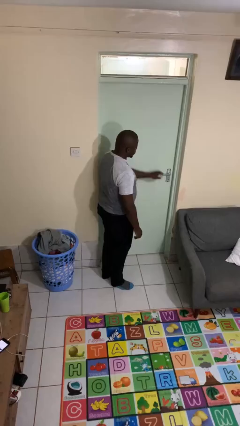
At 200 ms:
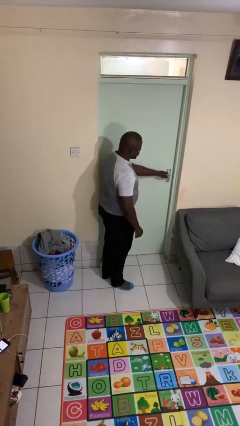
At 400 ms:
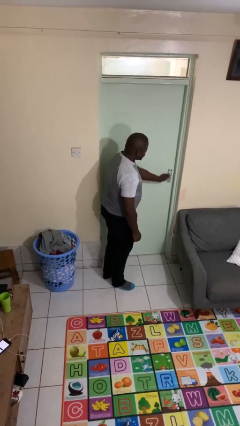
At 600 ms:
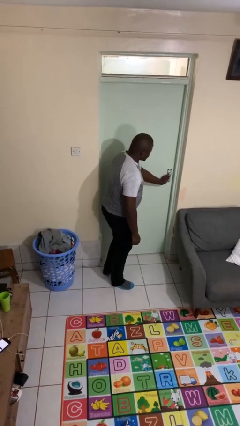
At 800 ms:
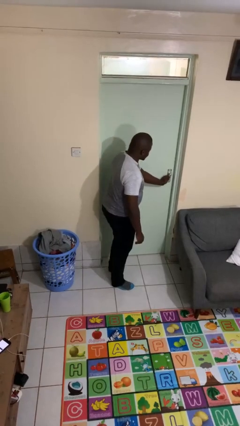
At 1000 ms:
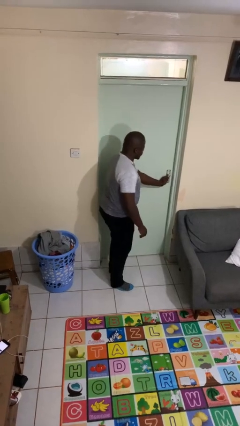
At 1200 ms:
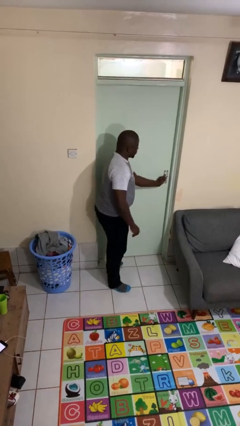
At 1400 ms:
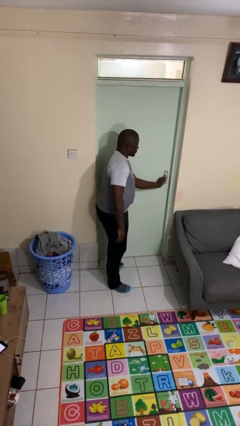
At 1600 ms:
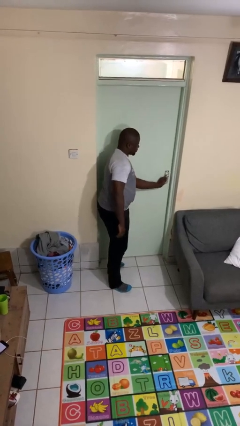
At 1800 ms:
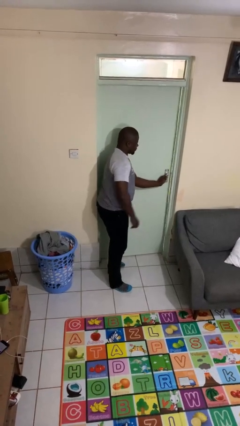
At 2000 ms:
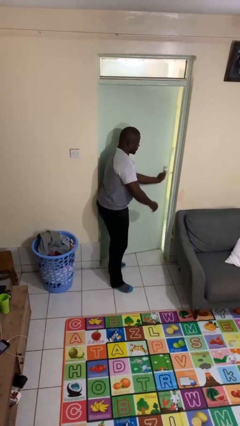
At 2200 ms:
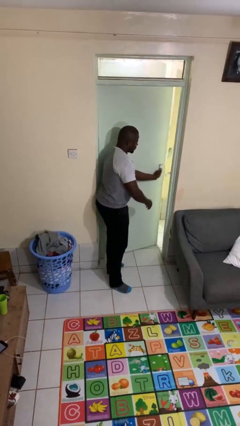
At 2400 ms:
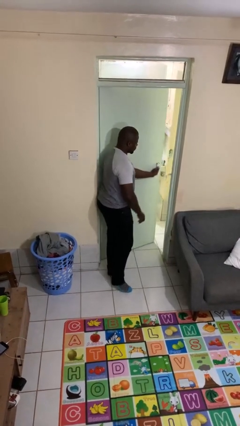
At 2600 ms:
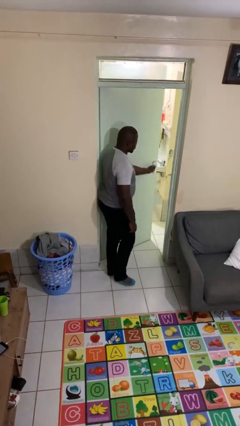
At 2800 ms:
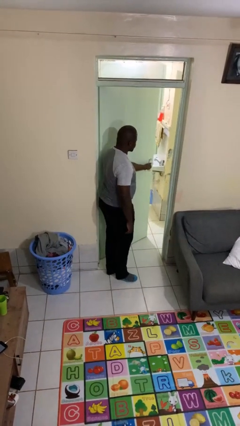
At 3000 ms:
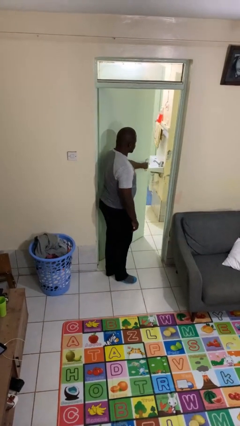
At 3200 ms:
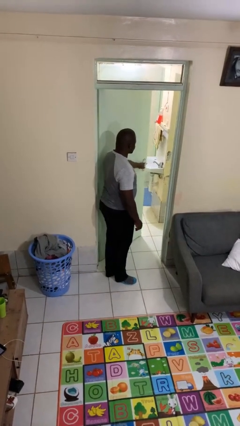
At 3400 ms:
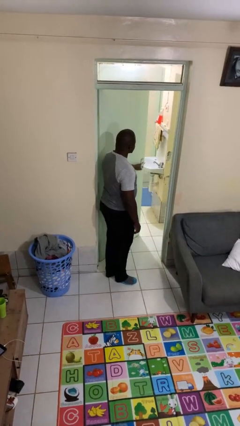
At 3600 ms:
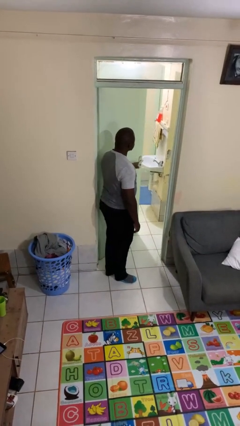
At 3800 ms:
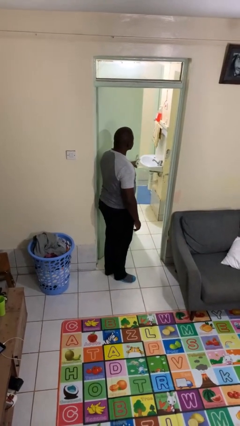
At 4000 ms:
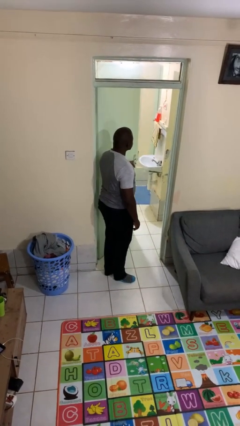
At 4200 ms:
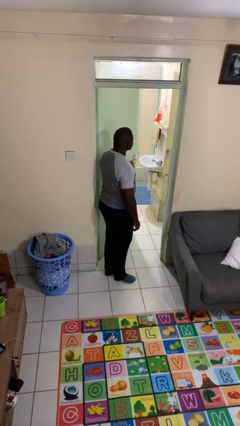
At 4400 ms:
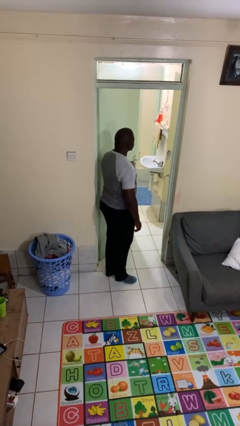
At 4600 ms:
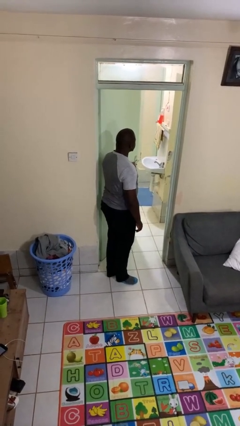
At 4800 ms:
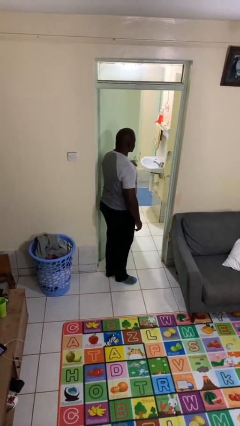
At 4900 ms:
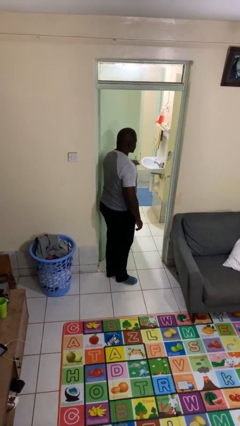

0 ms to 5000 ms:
person opens facility door

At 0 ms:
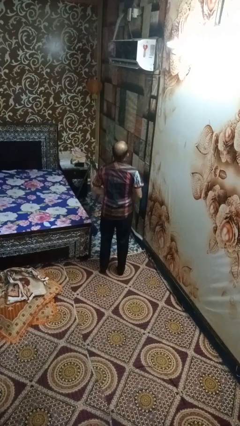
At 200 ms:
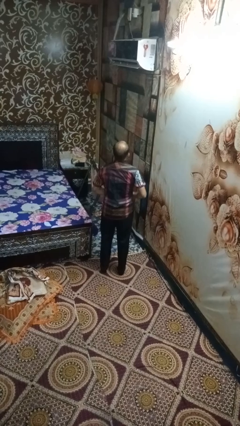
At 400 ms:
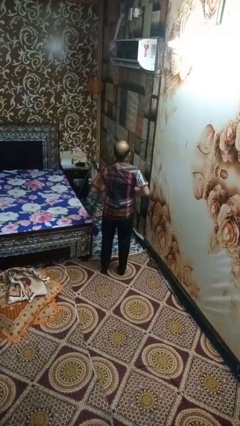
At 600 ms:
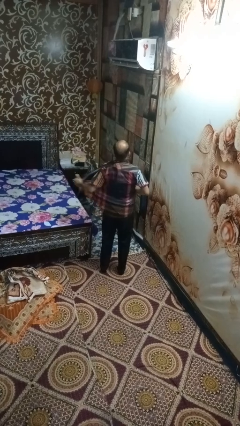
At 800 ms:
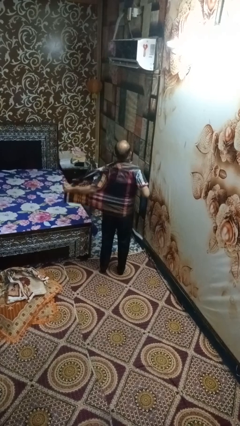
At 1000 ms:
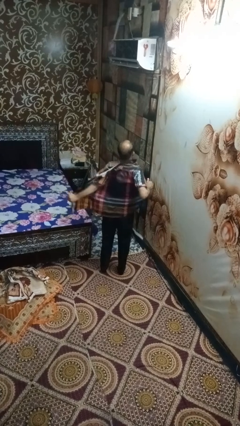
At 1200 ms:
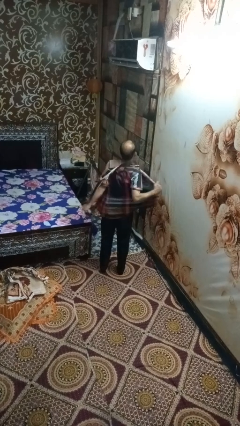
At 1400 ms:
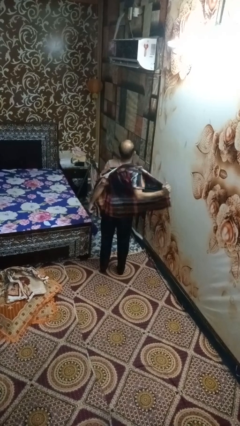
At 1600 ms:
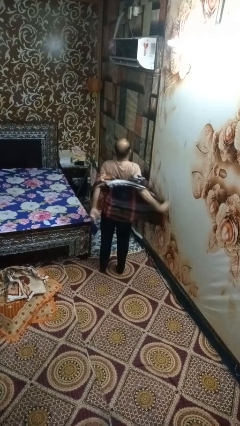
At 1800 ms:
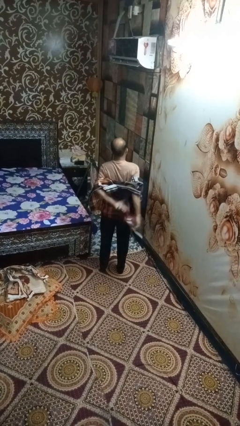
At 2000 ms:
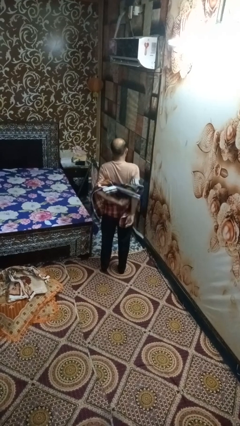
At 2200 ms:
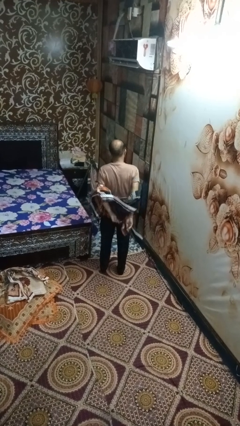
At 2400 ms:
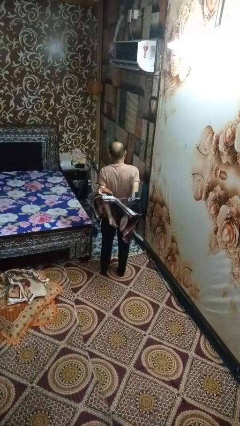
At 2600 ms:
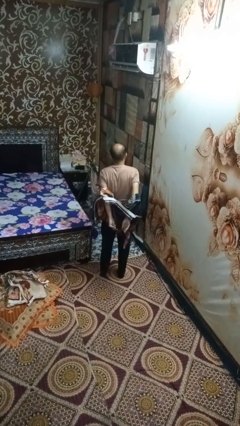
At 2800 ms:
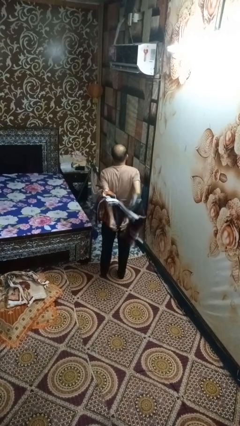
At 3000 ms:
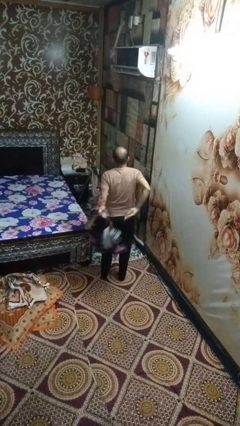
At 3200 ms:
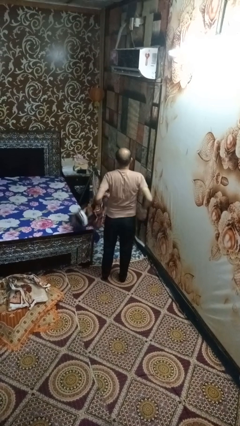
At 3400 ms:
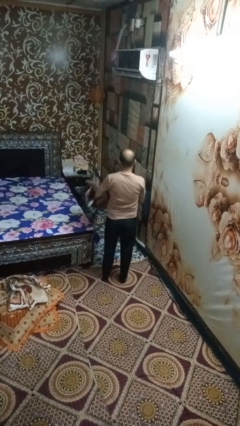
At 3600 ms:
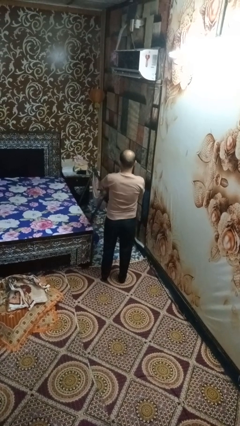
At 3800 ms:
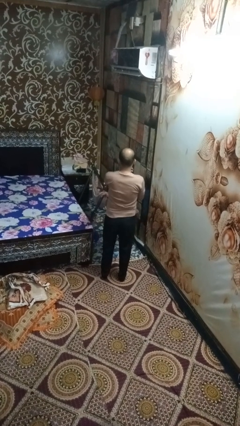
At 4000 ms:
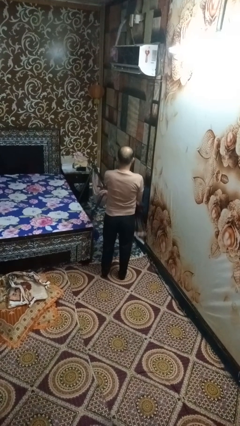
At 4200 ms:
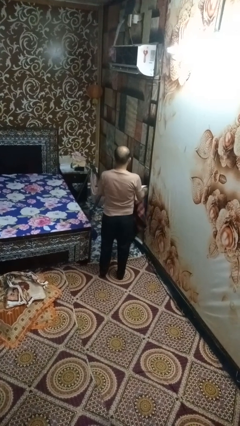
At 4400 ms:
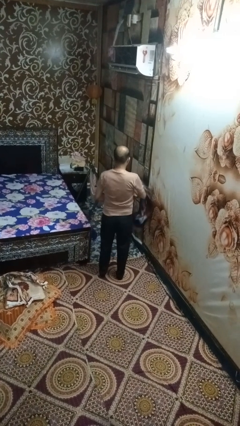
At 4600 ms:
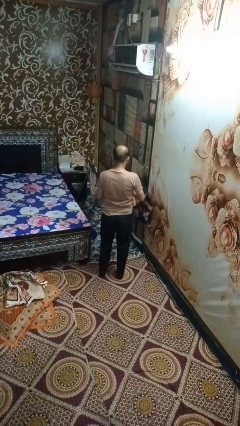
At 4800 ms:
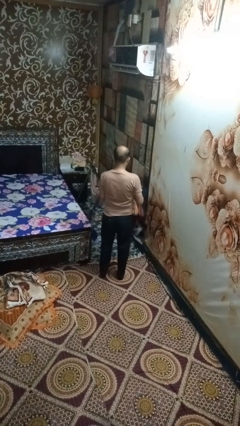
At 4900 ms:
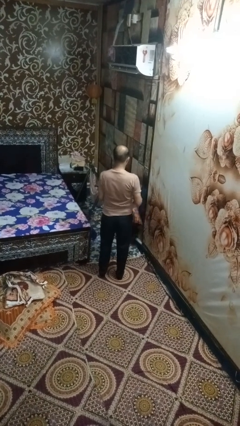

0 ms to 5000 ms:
person takes off shirt

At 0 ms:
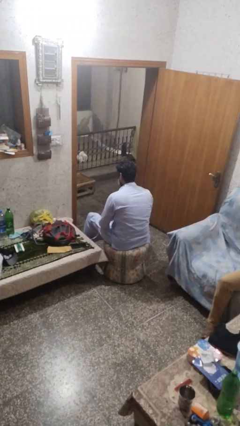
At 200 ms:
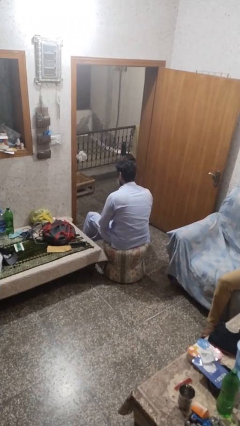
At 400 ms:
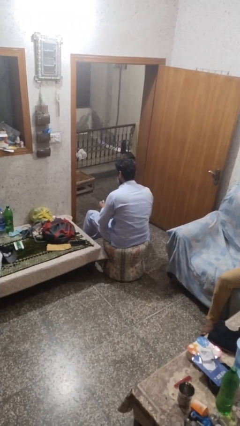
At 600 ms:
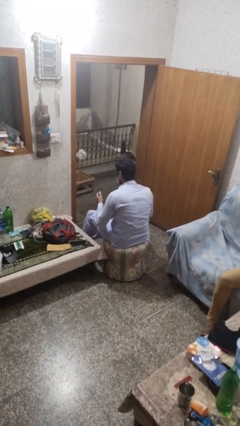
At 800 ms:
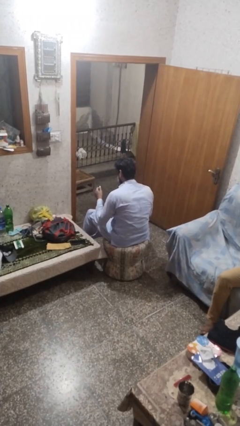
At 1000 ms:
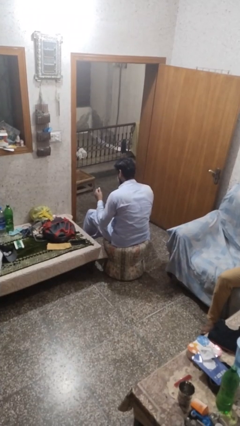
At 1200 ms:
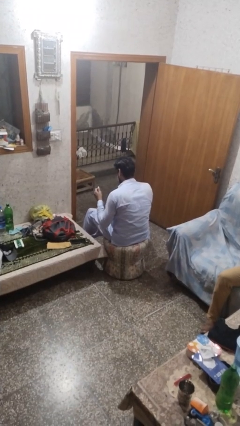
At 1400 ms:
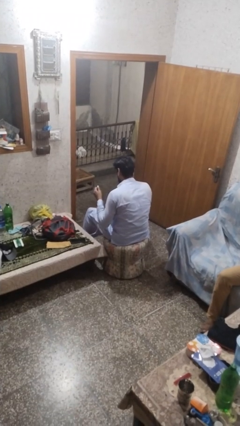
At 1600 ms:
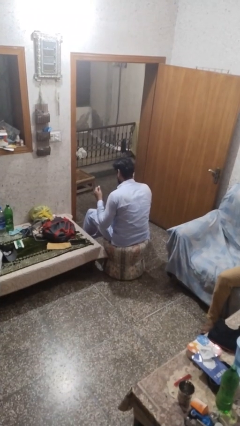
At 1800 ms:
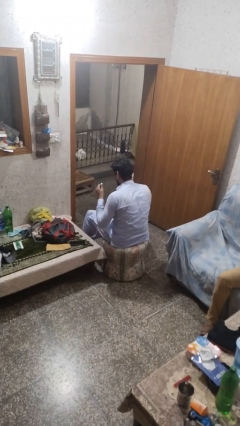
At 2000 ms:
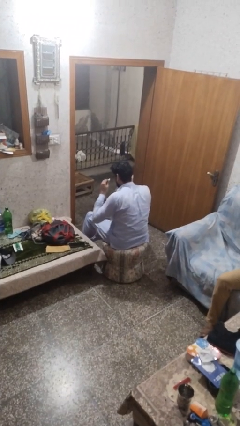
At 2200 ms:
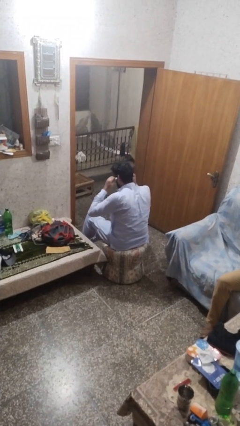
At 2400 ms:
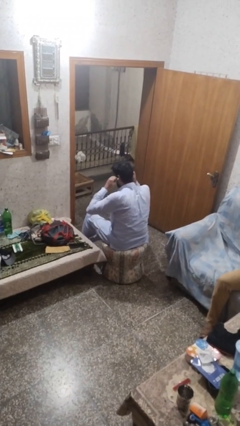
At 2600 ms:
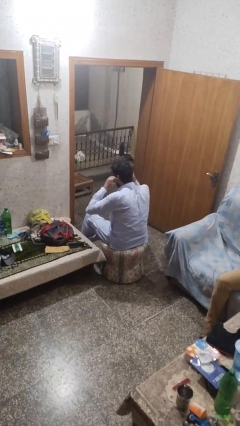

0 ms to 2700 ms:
person puts on headphones

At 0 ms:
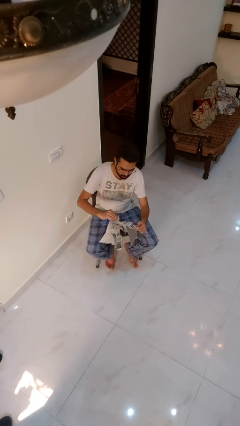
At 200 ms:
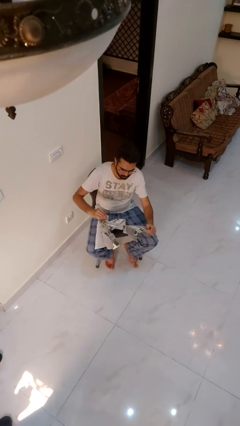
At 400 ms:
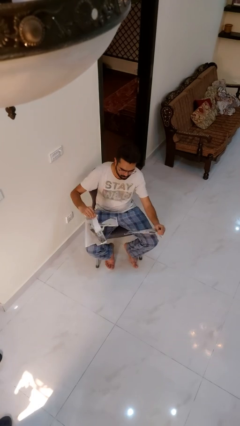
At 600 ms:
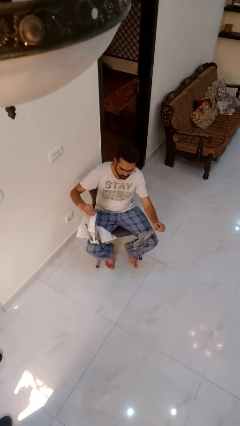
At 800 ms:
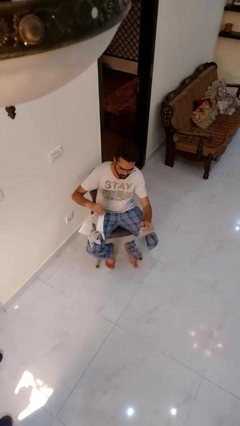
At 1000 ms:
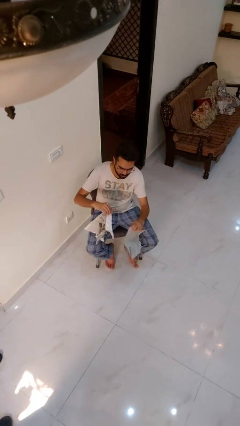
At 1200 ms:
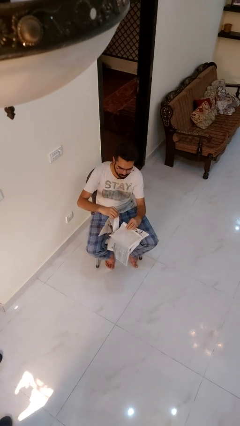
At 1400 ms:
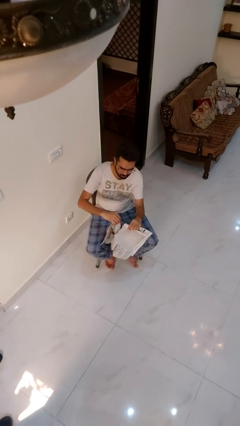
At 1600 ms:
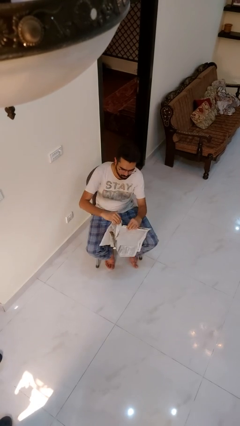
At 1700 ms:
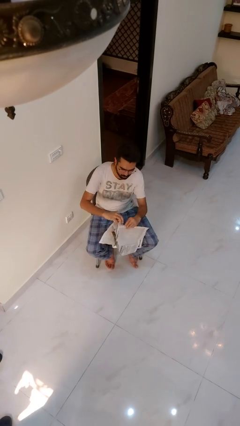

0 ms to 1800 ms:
person tears paper

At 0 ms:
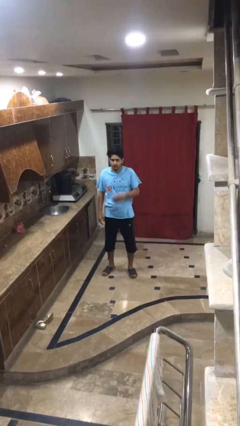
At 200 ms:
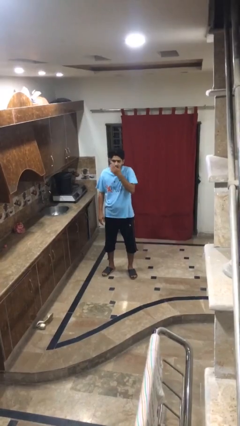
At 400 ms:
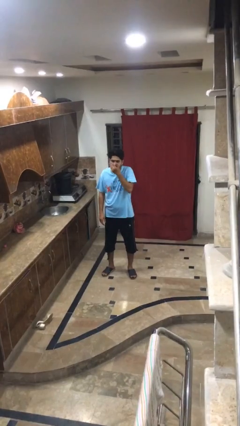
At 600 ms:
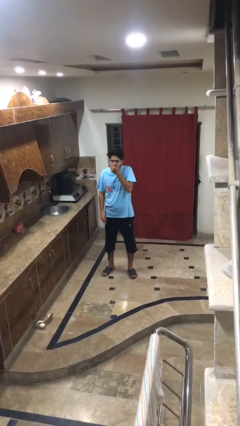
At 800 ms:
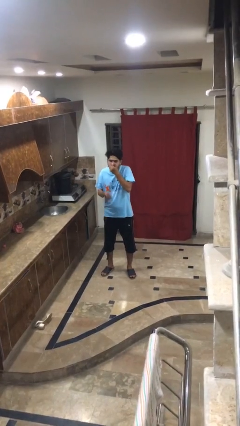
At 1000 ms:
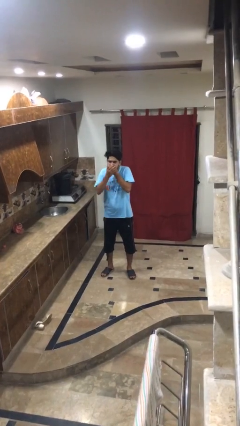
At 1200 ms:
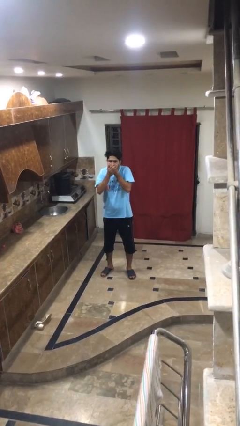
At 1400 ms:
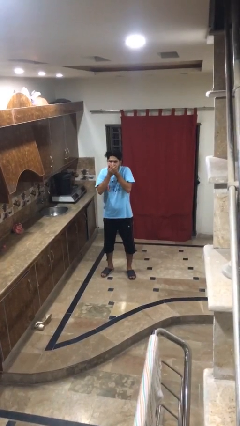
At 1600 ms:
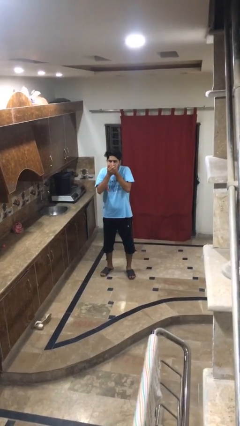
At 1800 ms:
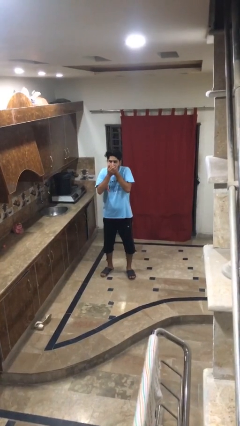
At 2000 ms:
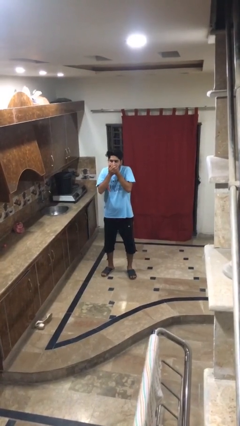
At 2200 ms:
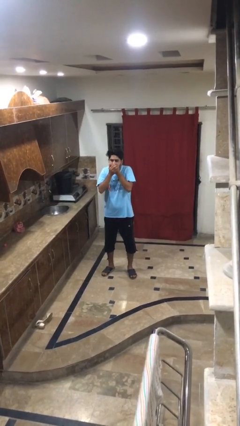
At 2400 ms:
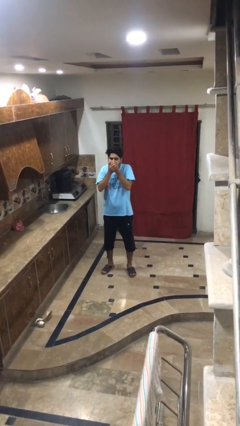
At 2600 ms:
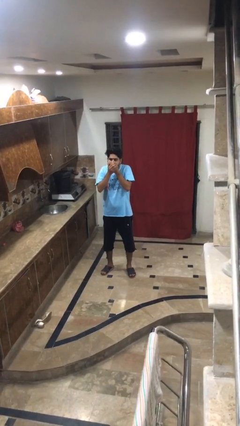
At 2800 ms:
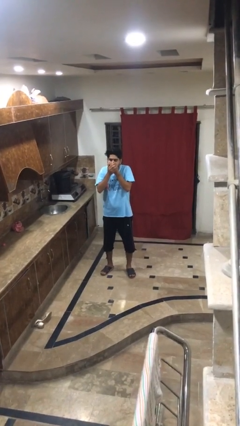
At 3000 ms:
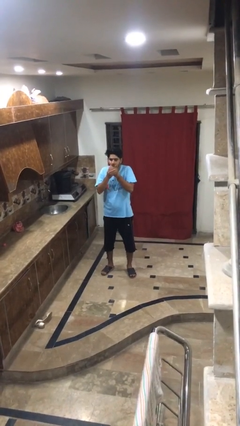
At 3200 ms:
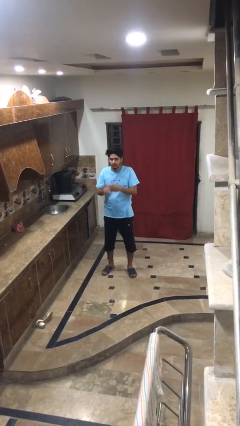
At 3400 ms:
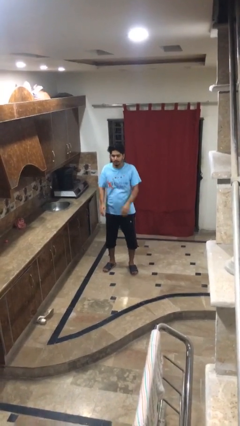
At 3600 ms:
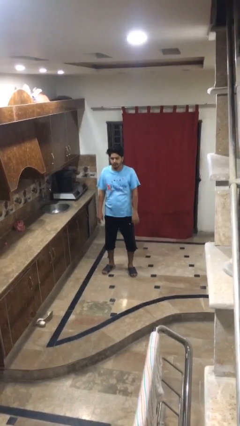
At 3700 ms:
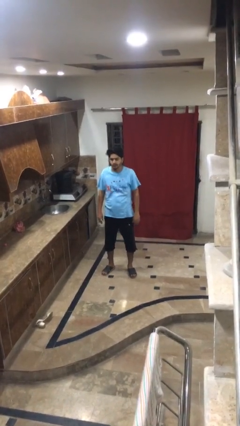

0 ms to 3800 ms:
person sneezes into hand
